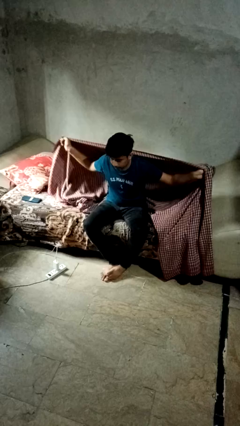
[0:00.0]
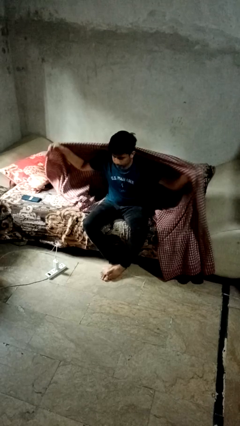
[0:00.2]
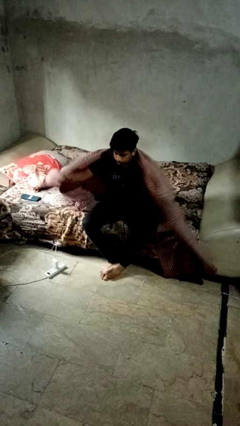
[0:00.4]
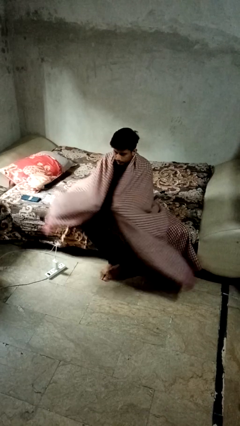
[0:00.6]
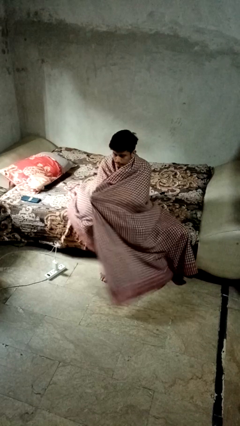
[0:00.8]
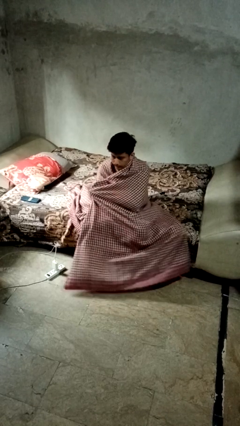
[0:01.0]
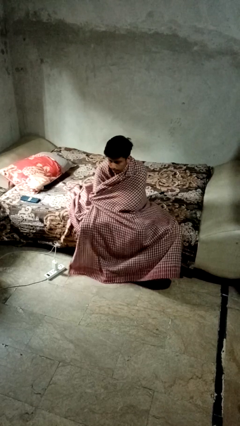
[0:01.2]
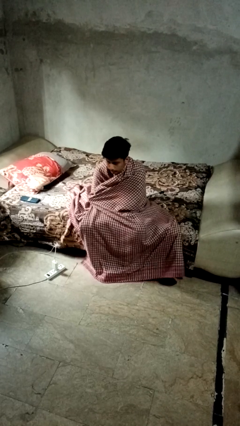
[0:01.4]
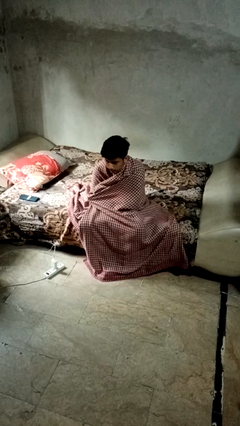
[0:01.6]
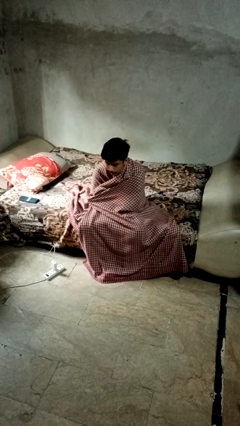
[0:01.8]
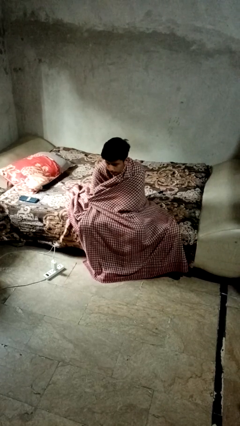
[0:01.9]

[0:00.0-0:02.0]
person covers with blanket

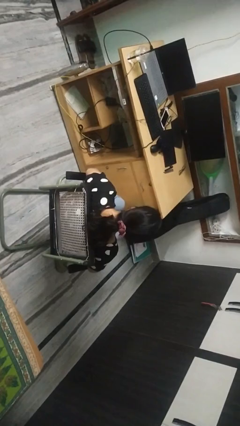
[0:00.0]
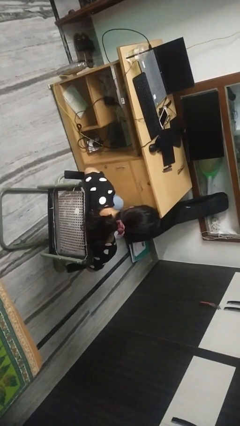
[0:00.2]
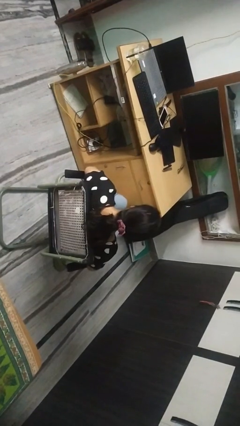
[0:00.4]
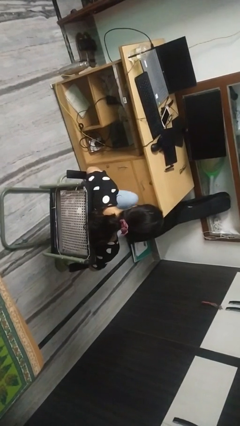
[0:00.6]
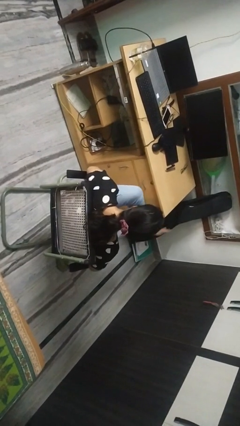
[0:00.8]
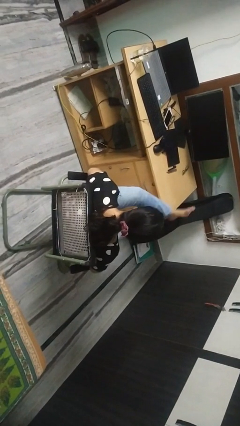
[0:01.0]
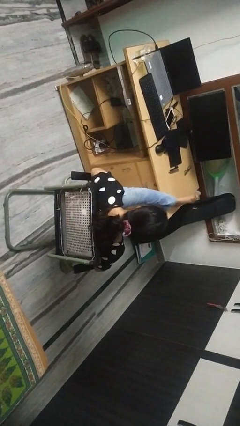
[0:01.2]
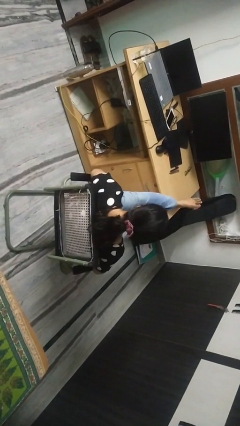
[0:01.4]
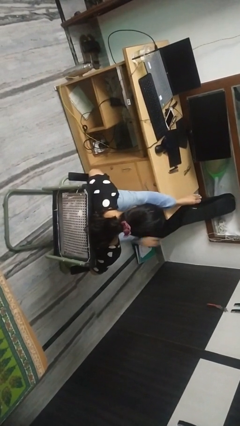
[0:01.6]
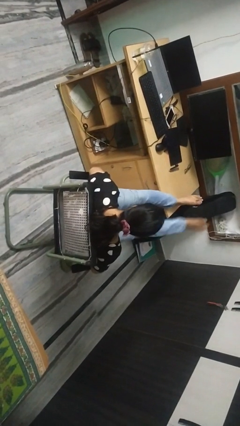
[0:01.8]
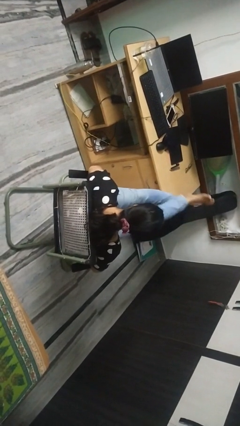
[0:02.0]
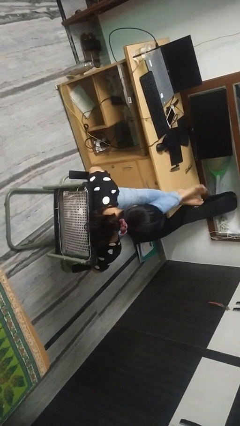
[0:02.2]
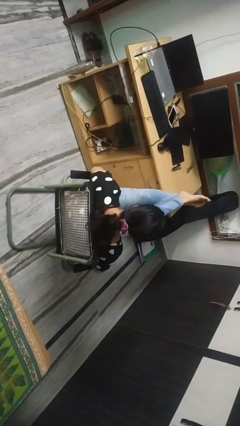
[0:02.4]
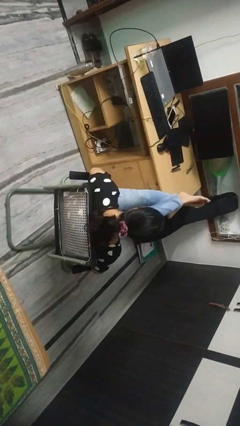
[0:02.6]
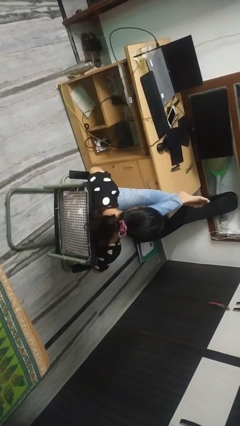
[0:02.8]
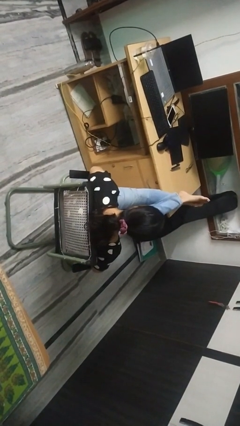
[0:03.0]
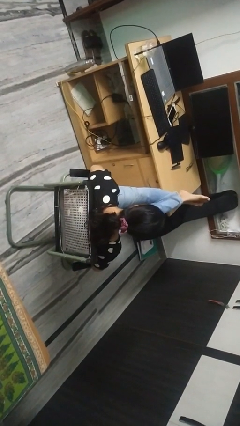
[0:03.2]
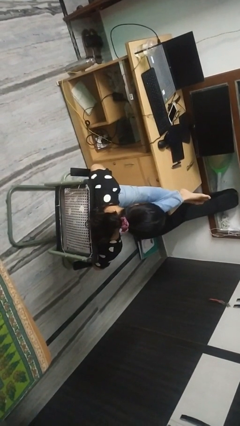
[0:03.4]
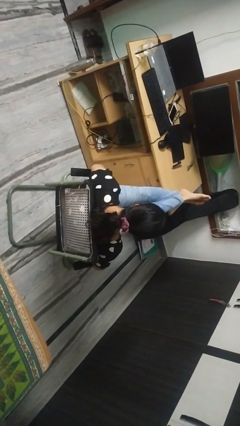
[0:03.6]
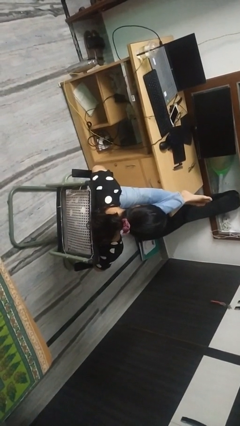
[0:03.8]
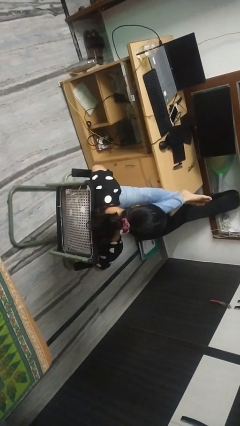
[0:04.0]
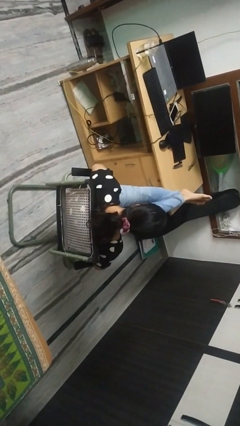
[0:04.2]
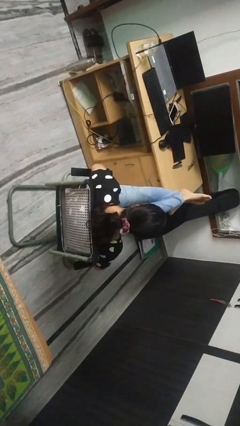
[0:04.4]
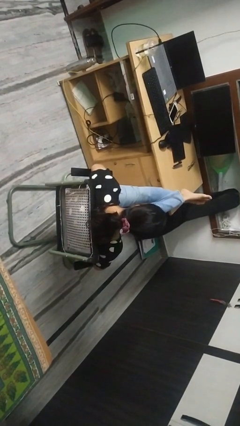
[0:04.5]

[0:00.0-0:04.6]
person puts feet up

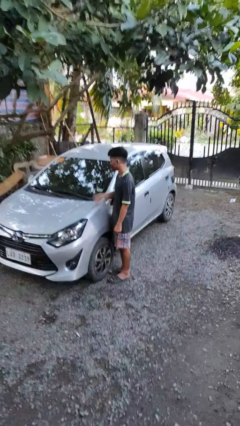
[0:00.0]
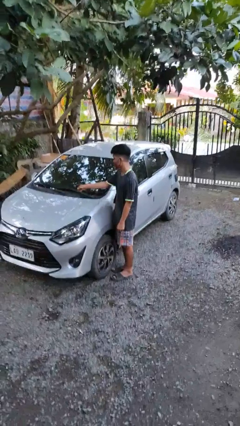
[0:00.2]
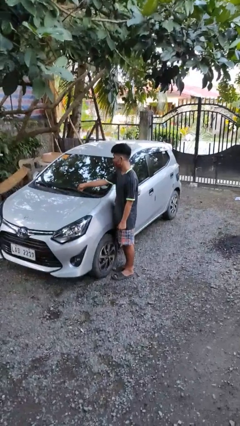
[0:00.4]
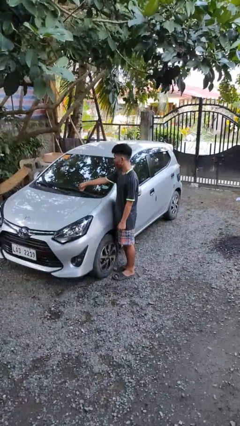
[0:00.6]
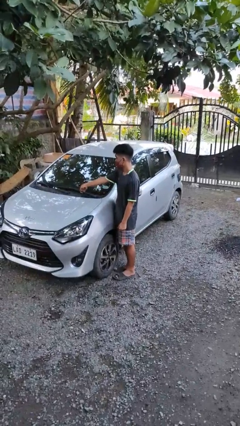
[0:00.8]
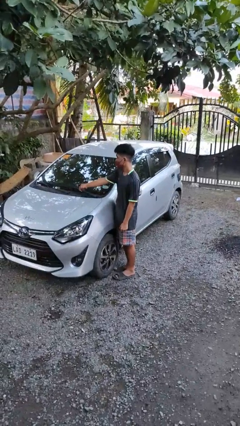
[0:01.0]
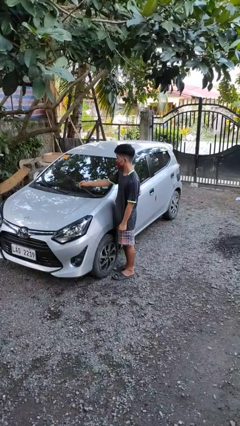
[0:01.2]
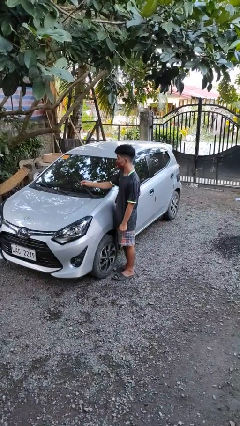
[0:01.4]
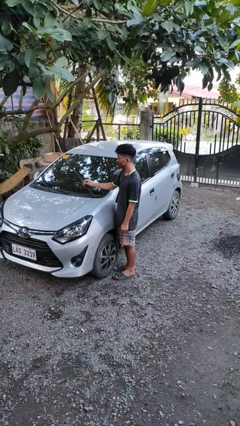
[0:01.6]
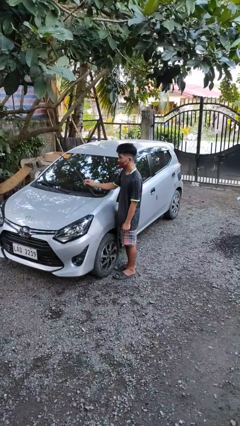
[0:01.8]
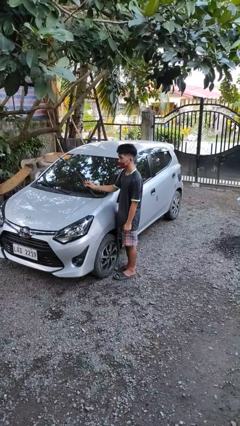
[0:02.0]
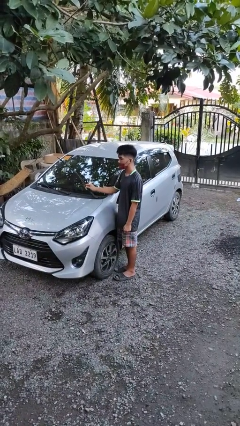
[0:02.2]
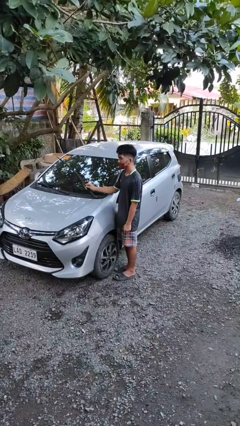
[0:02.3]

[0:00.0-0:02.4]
person flips up car wipers

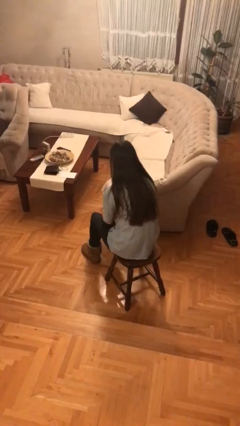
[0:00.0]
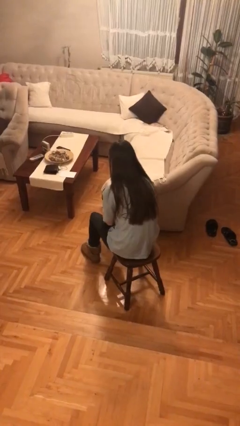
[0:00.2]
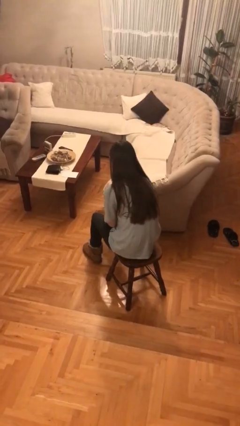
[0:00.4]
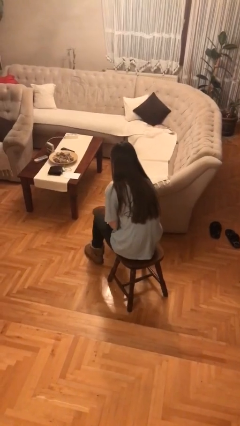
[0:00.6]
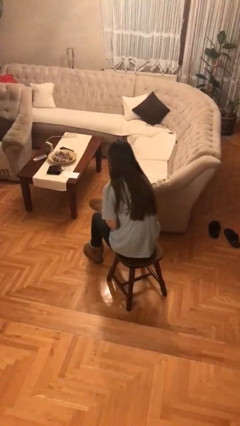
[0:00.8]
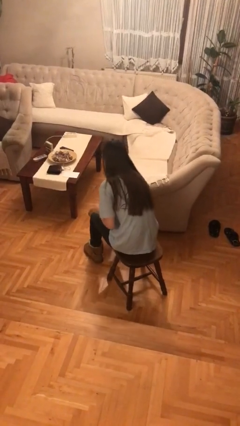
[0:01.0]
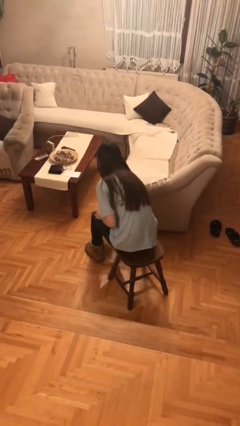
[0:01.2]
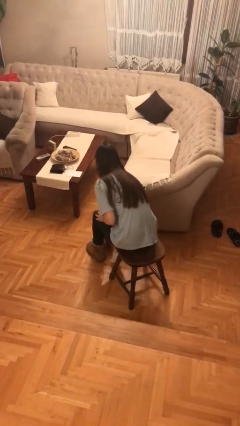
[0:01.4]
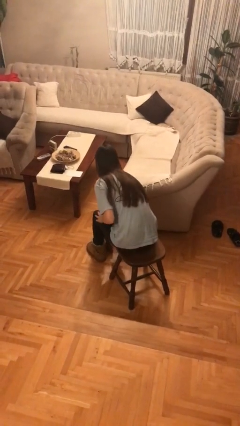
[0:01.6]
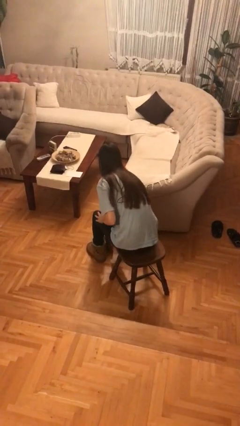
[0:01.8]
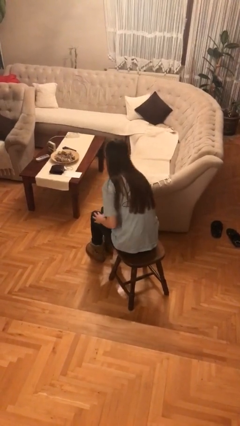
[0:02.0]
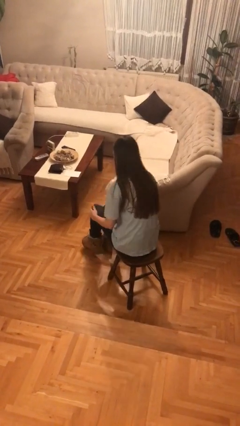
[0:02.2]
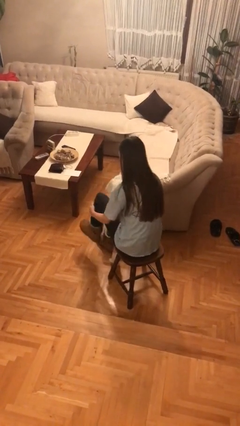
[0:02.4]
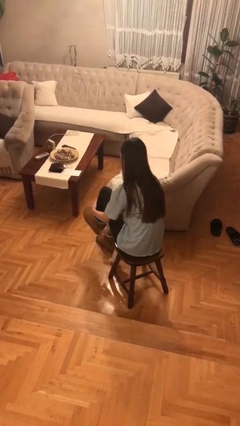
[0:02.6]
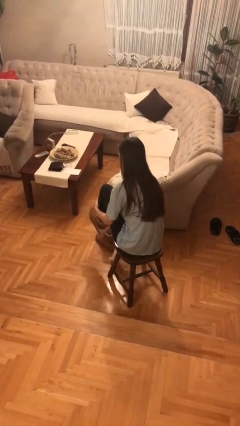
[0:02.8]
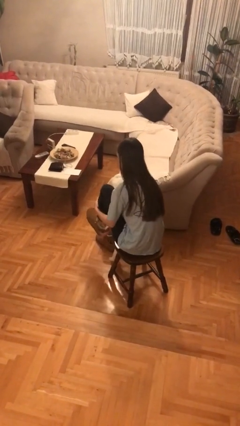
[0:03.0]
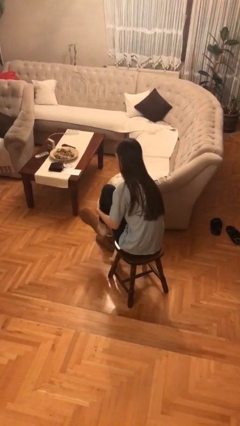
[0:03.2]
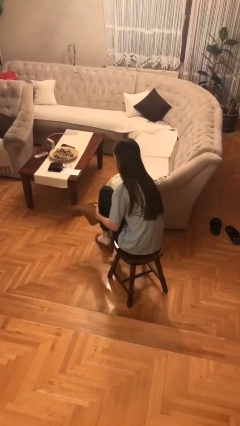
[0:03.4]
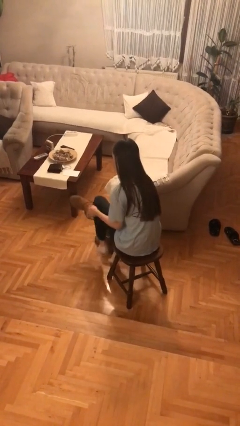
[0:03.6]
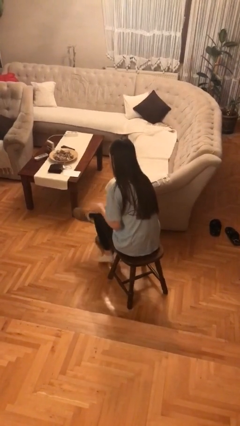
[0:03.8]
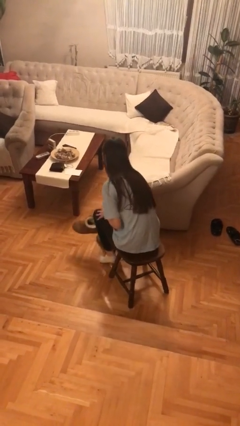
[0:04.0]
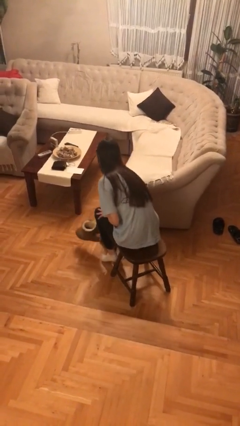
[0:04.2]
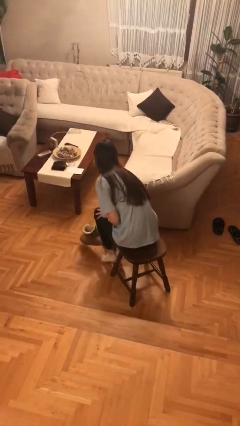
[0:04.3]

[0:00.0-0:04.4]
person takes off shoes

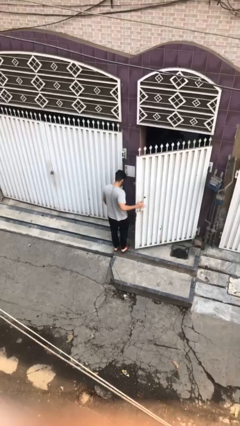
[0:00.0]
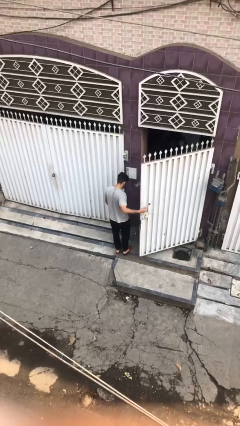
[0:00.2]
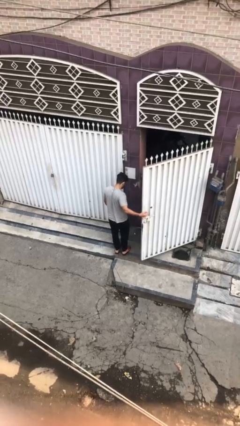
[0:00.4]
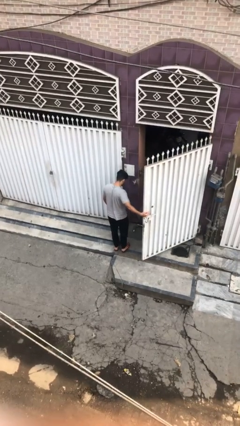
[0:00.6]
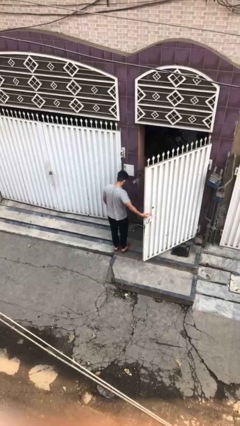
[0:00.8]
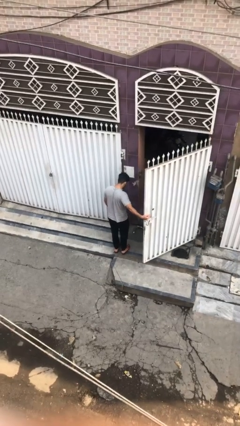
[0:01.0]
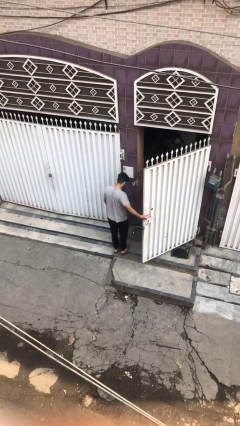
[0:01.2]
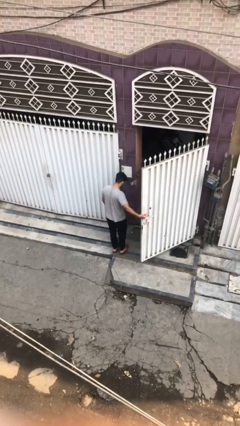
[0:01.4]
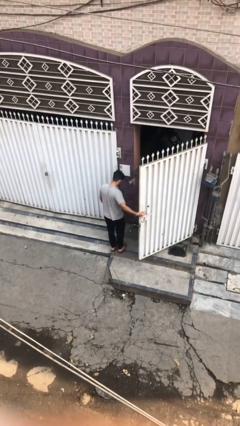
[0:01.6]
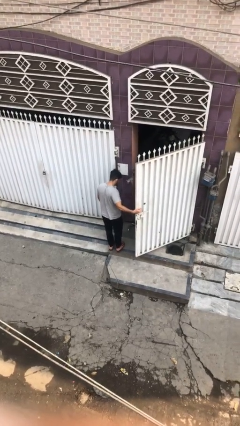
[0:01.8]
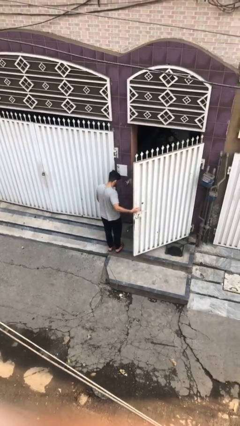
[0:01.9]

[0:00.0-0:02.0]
person opens facility door

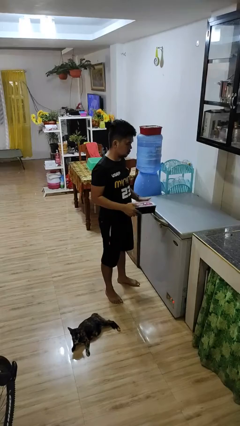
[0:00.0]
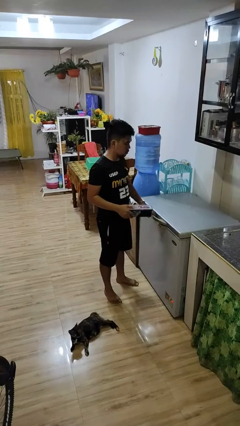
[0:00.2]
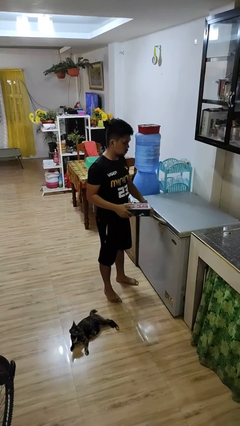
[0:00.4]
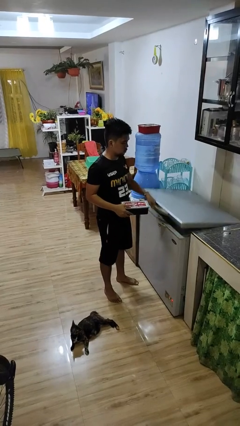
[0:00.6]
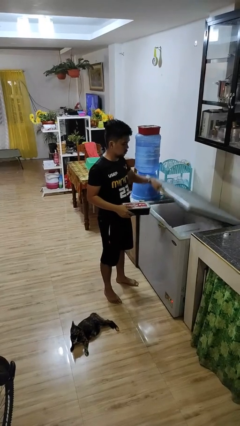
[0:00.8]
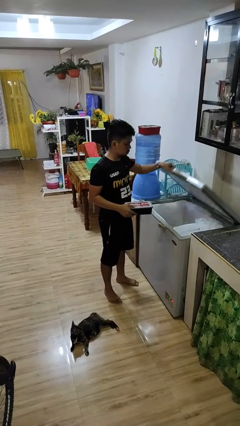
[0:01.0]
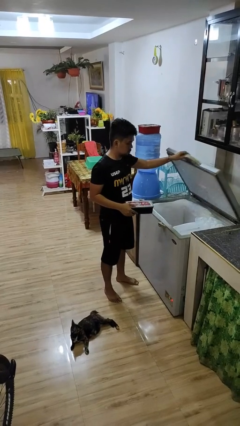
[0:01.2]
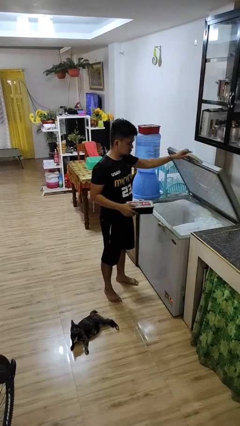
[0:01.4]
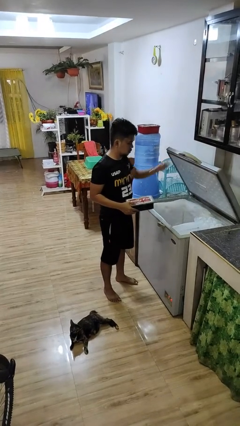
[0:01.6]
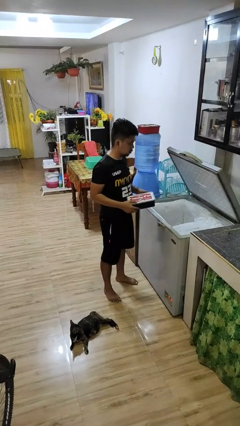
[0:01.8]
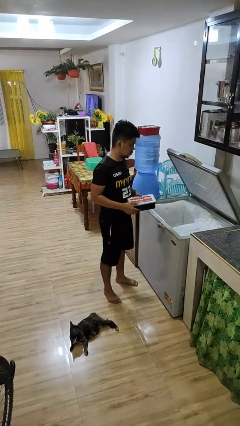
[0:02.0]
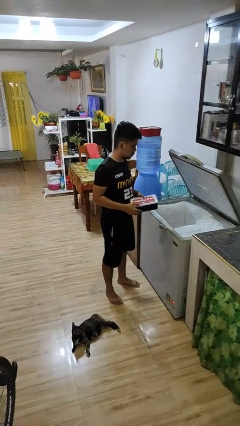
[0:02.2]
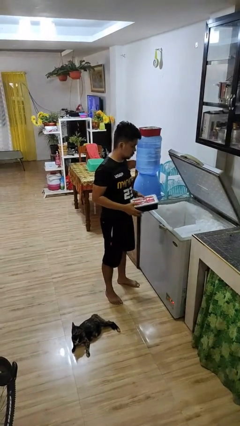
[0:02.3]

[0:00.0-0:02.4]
person opens refrigerator
